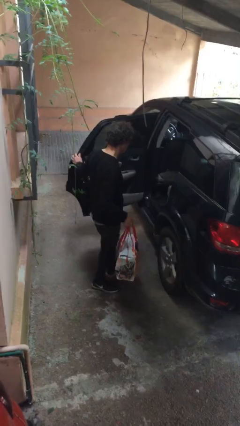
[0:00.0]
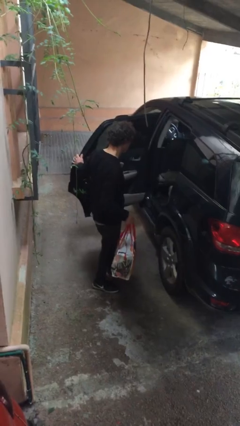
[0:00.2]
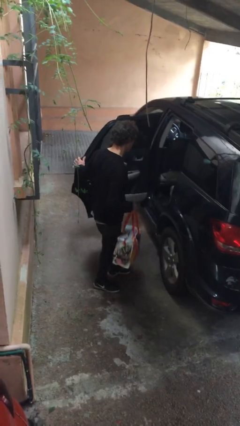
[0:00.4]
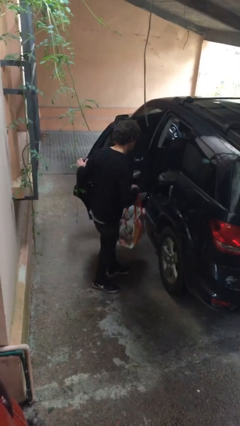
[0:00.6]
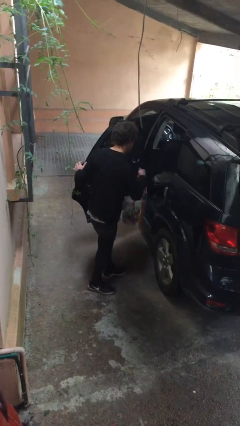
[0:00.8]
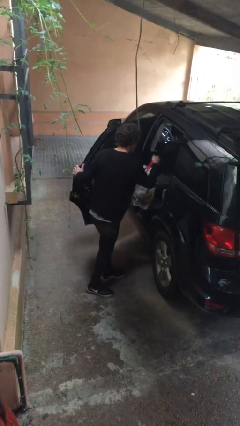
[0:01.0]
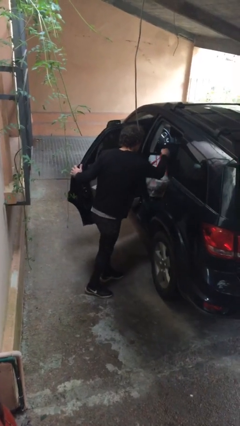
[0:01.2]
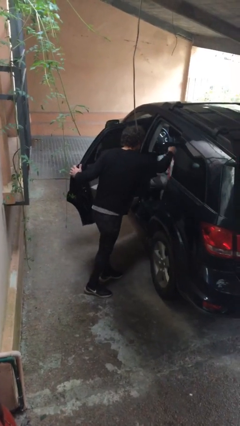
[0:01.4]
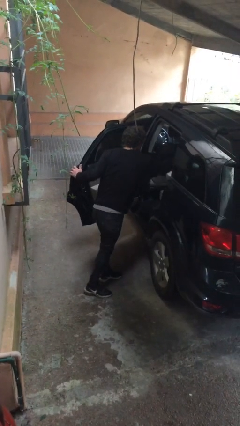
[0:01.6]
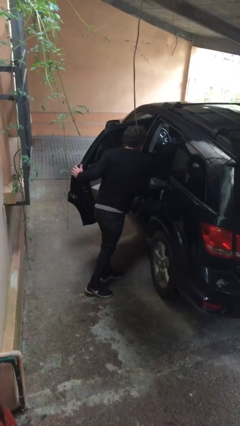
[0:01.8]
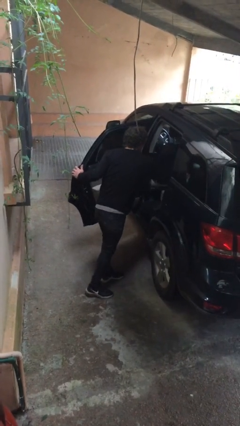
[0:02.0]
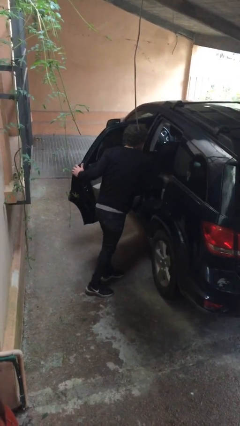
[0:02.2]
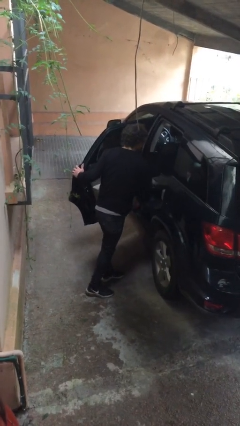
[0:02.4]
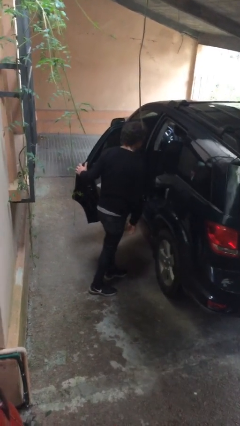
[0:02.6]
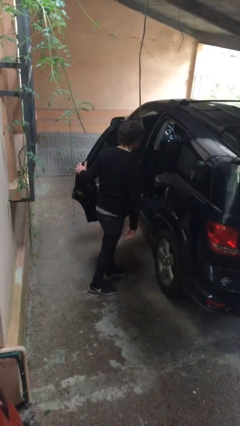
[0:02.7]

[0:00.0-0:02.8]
person loads car

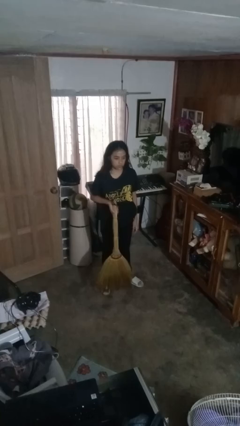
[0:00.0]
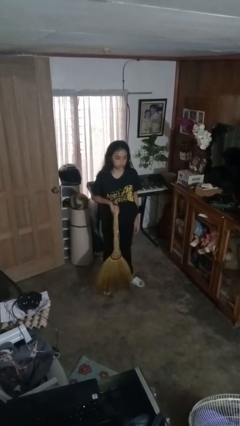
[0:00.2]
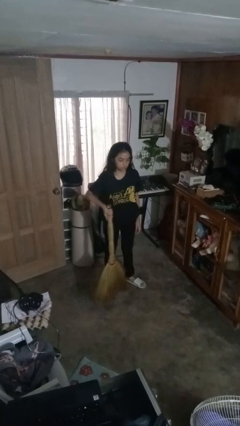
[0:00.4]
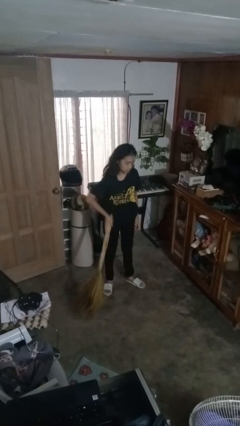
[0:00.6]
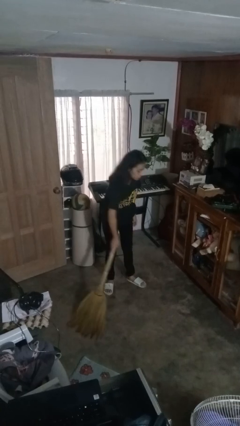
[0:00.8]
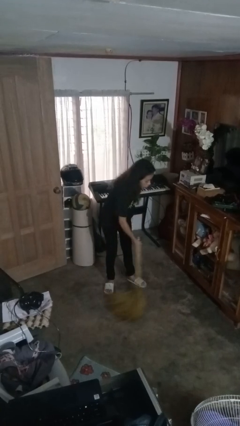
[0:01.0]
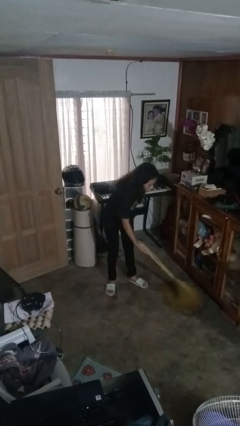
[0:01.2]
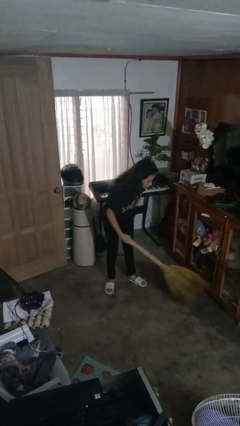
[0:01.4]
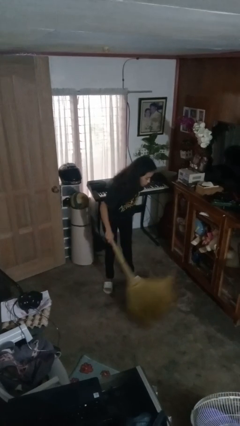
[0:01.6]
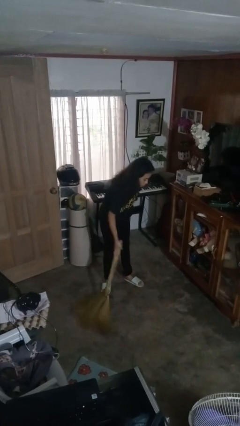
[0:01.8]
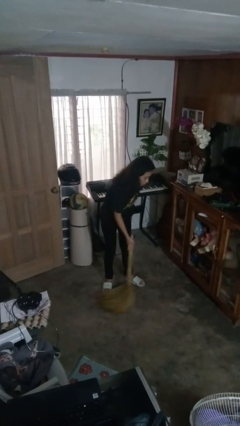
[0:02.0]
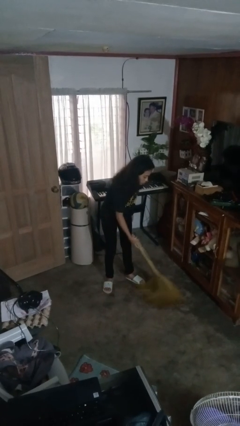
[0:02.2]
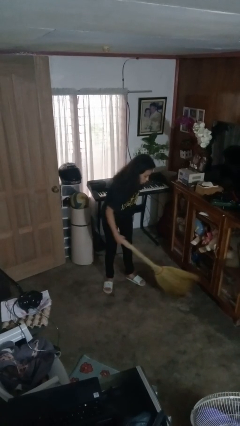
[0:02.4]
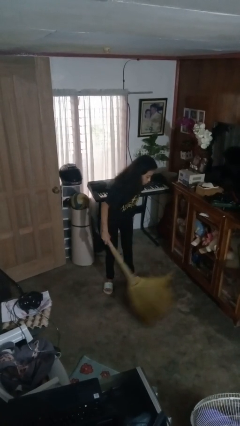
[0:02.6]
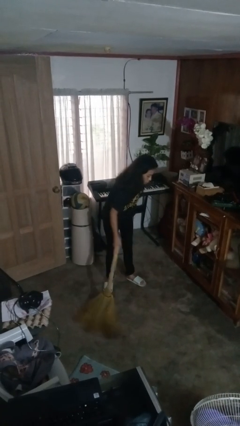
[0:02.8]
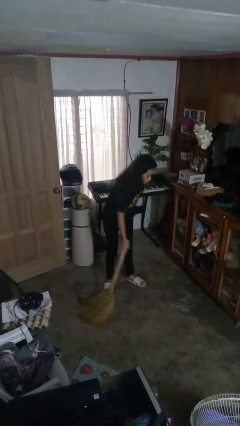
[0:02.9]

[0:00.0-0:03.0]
person sweeps floor

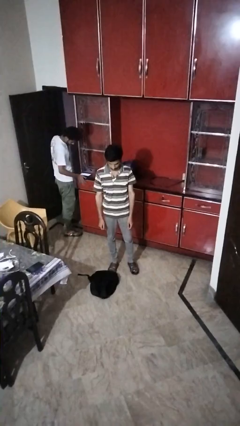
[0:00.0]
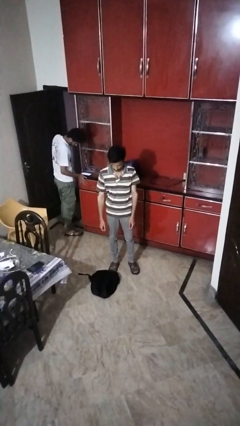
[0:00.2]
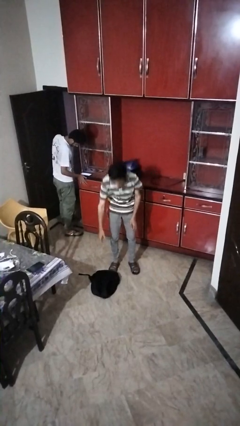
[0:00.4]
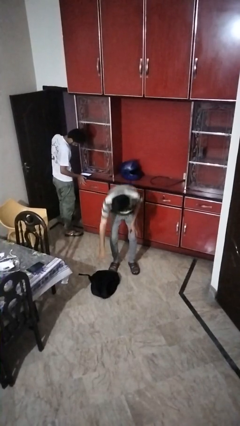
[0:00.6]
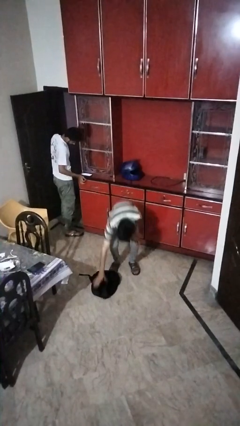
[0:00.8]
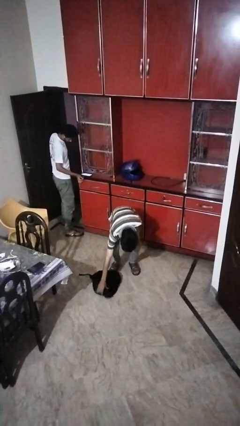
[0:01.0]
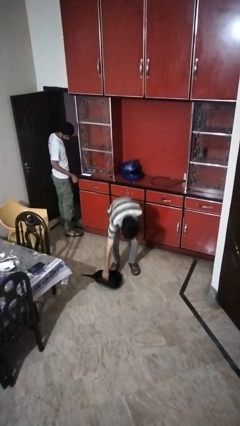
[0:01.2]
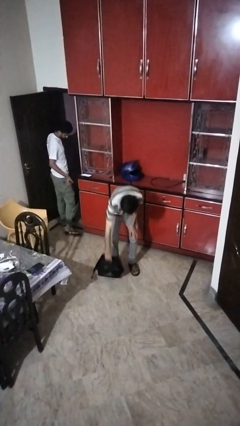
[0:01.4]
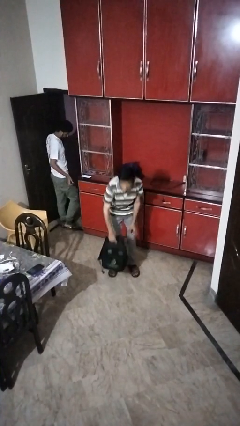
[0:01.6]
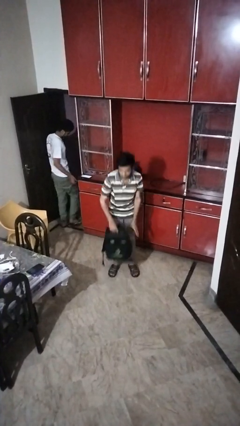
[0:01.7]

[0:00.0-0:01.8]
person picks up object from floor

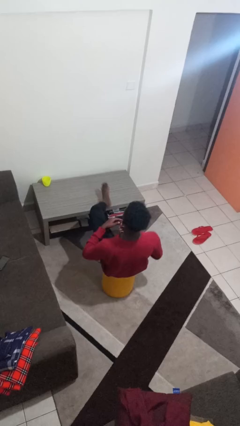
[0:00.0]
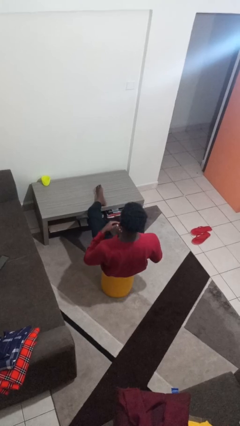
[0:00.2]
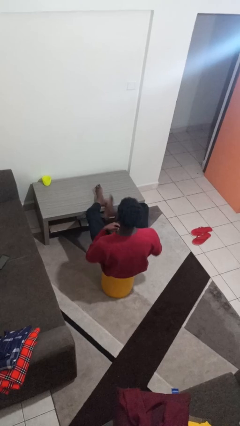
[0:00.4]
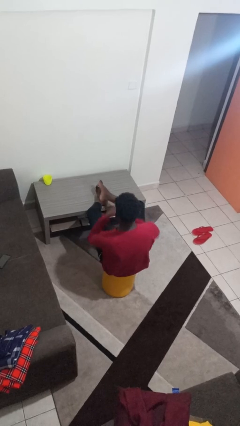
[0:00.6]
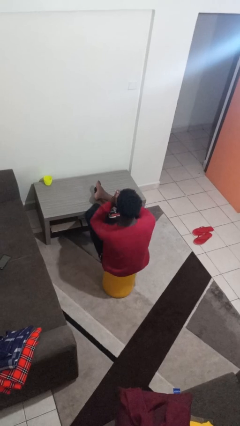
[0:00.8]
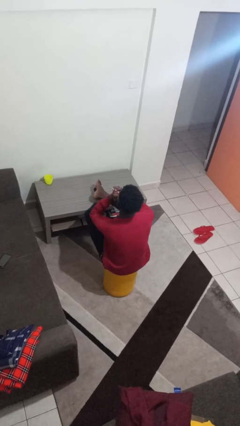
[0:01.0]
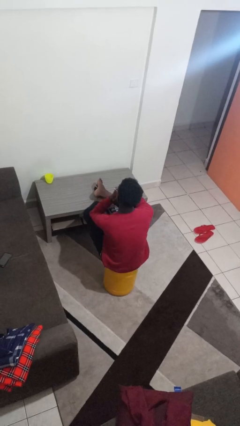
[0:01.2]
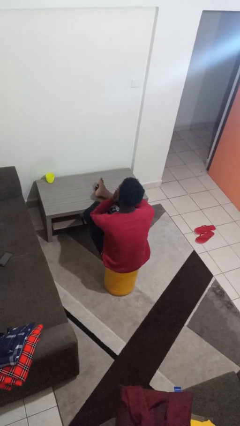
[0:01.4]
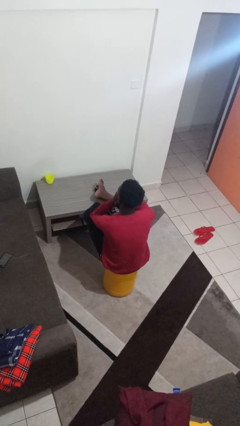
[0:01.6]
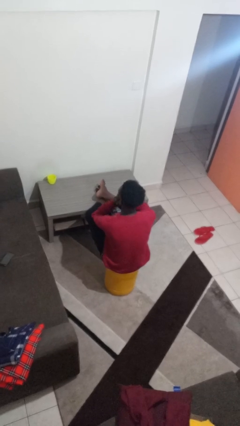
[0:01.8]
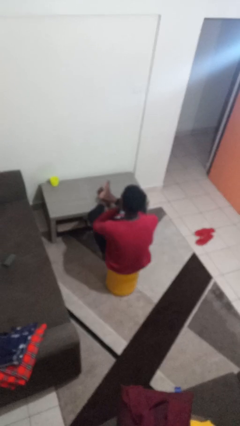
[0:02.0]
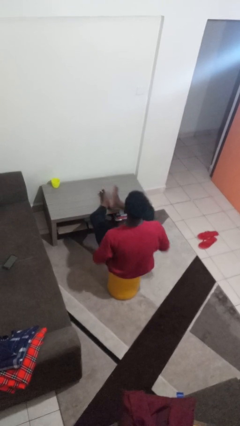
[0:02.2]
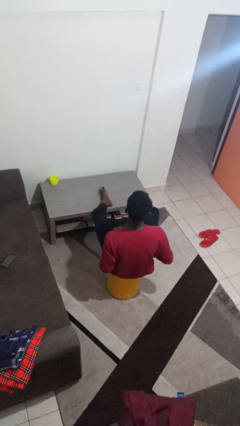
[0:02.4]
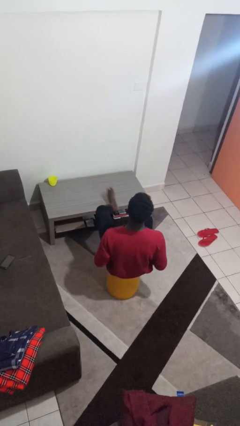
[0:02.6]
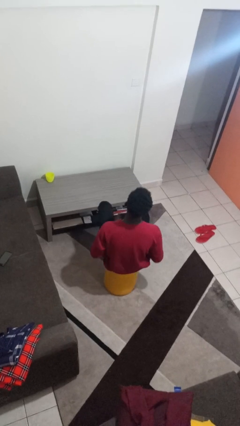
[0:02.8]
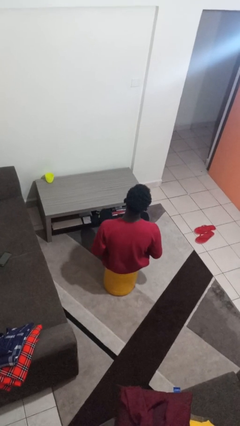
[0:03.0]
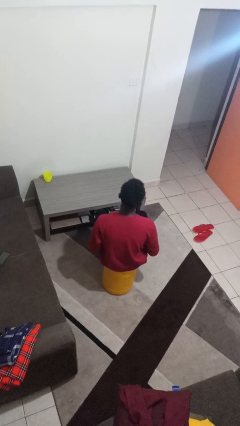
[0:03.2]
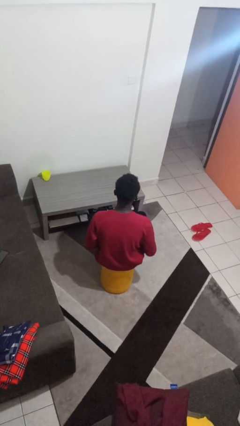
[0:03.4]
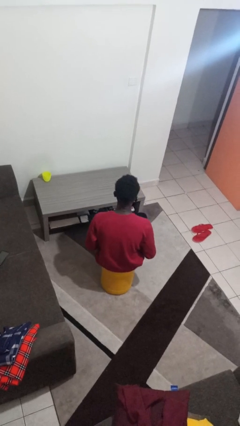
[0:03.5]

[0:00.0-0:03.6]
person puts feet up

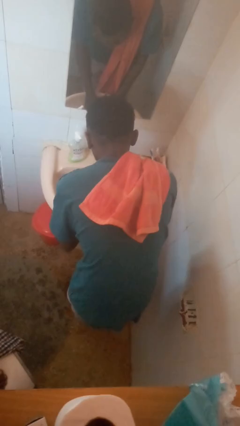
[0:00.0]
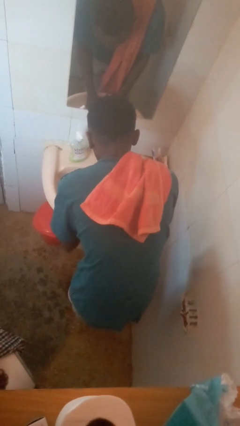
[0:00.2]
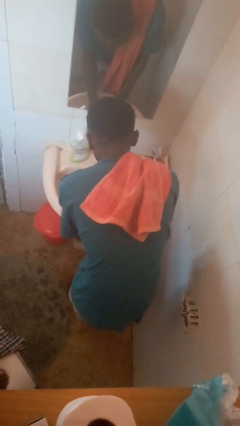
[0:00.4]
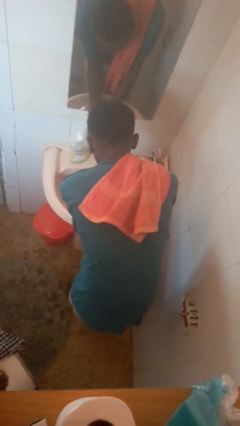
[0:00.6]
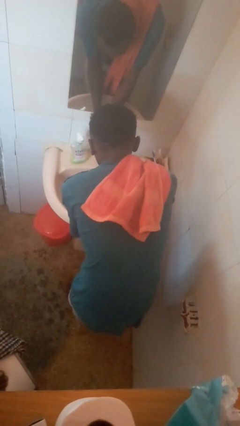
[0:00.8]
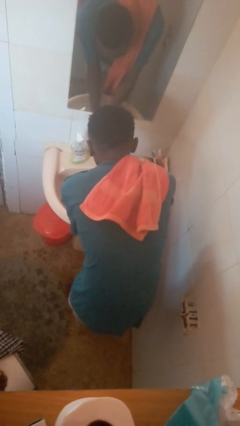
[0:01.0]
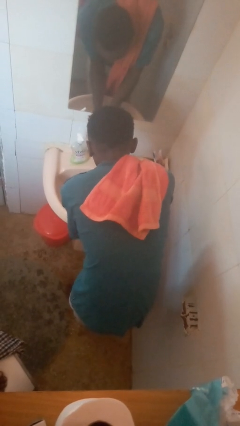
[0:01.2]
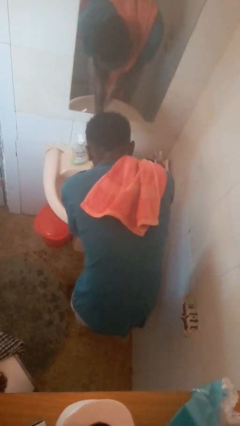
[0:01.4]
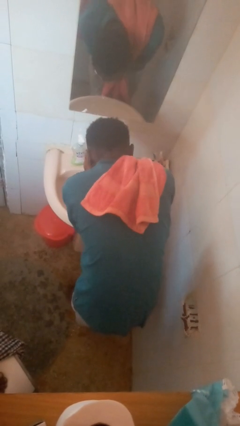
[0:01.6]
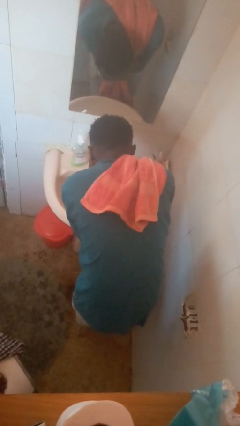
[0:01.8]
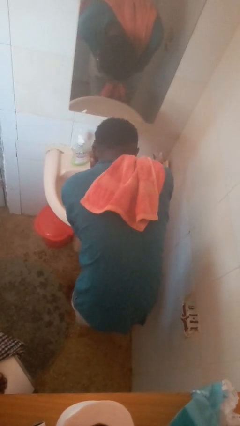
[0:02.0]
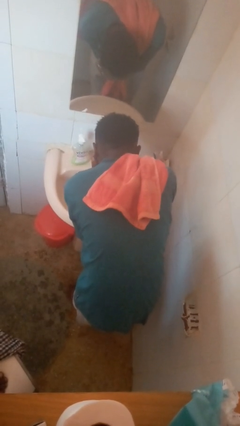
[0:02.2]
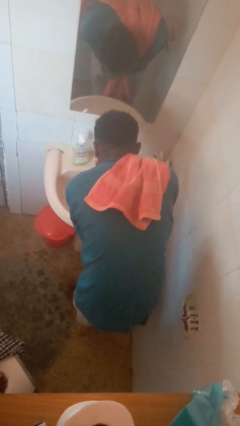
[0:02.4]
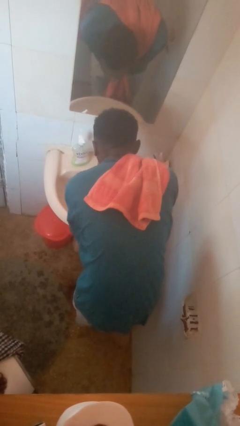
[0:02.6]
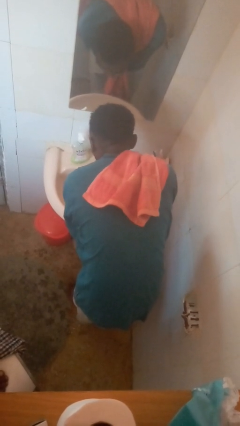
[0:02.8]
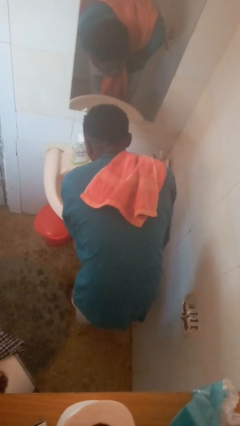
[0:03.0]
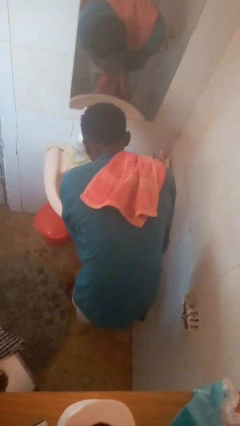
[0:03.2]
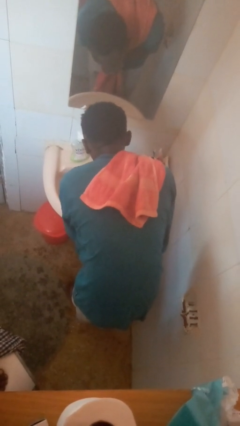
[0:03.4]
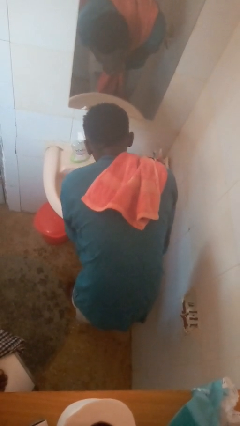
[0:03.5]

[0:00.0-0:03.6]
person washes face

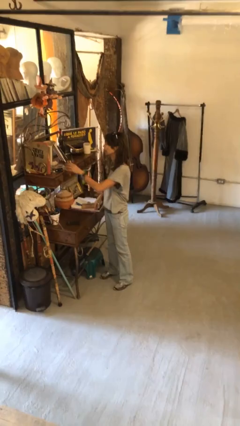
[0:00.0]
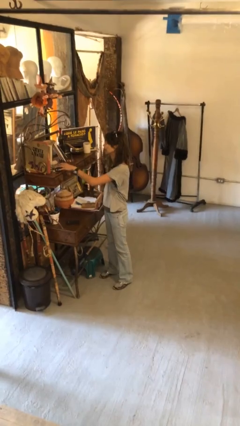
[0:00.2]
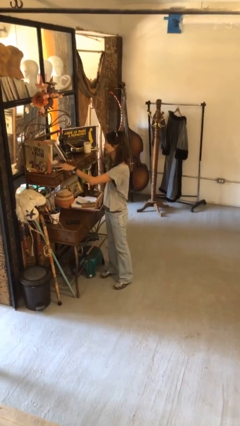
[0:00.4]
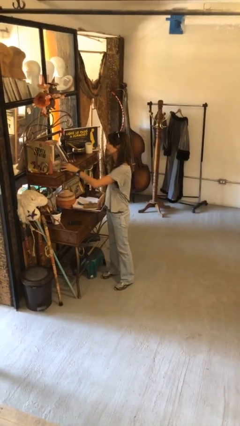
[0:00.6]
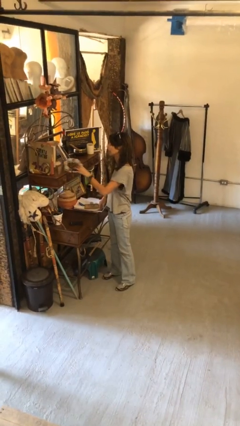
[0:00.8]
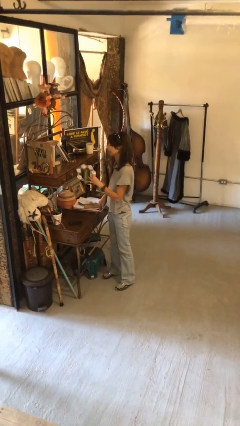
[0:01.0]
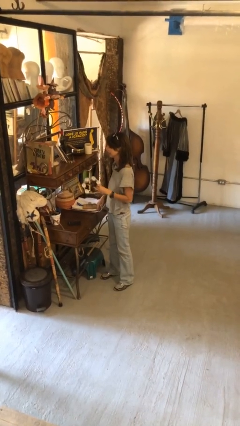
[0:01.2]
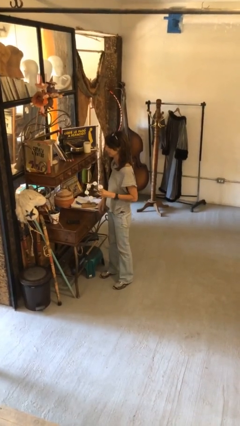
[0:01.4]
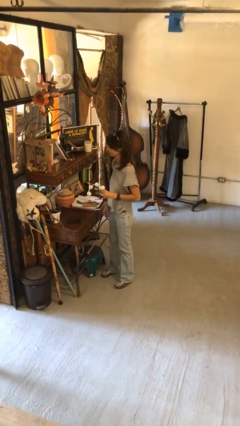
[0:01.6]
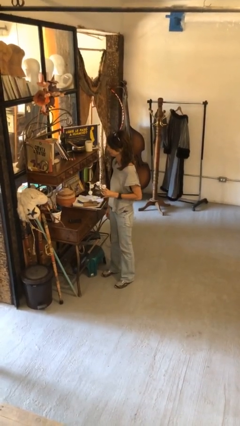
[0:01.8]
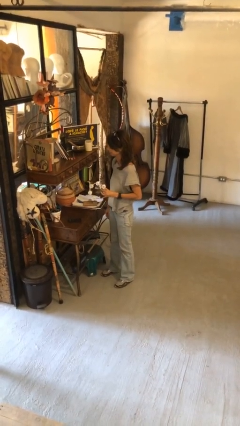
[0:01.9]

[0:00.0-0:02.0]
person picks up object from countertop

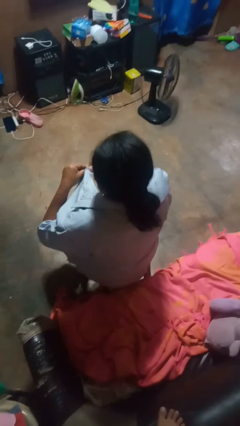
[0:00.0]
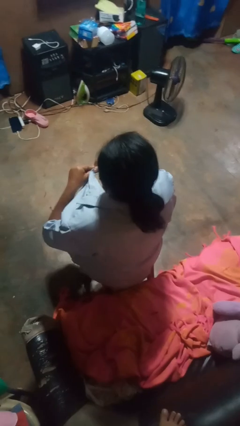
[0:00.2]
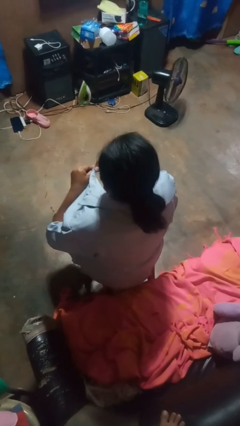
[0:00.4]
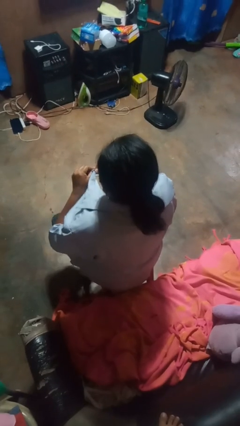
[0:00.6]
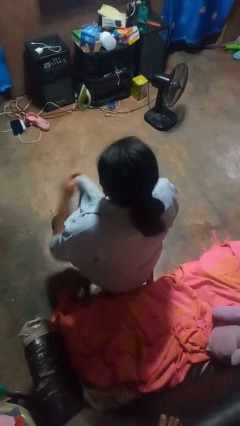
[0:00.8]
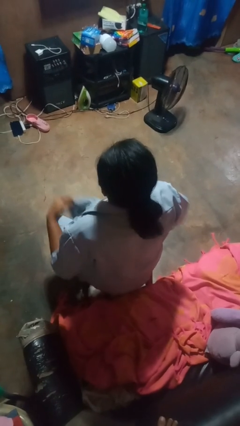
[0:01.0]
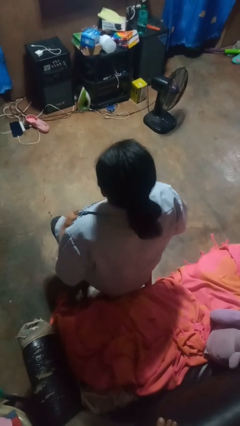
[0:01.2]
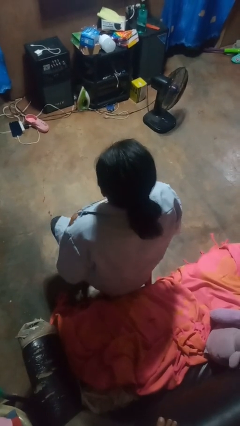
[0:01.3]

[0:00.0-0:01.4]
person unbuttons shirt
